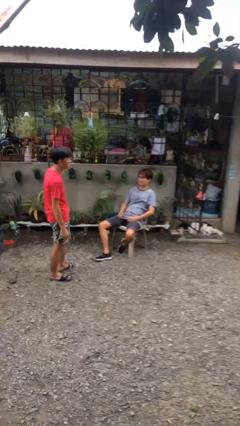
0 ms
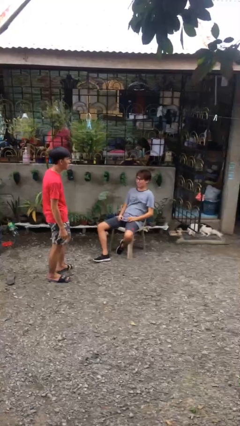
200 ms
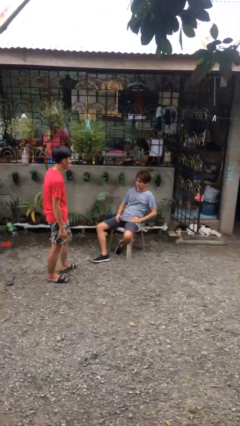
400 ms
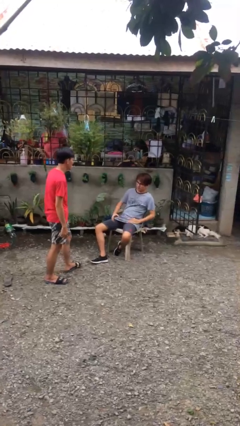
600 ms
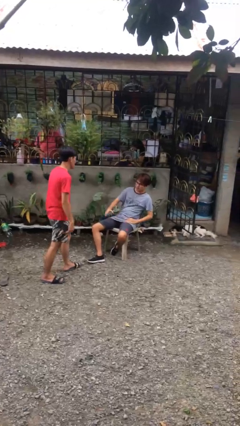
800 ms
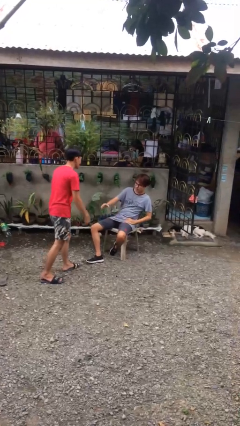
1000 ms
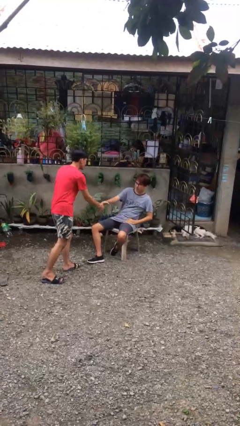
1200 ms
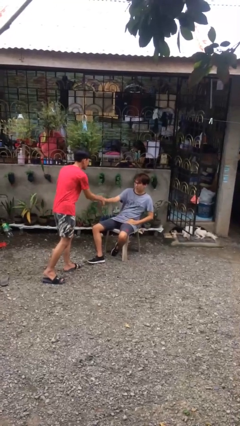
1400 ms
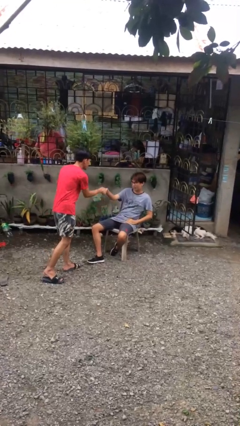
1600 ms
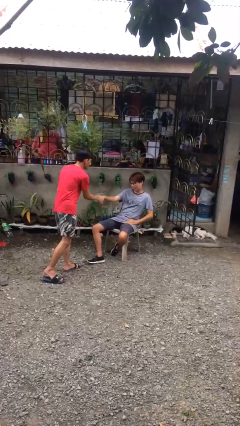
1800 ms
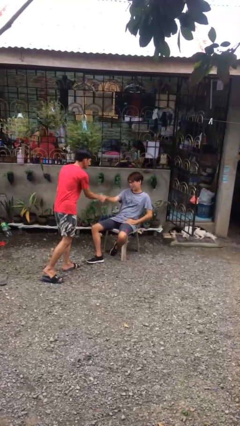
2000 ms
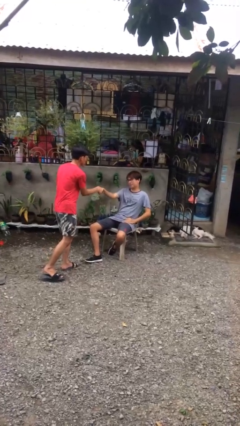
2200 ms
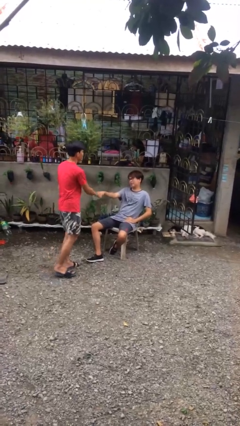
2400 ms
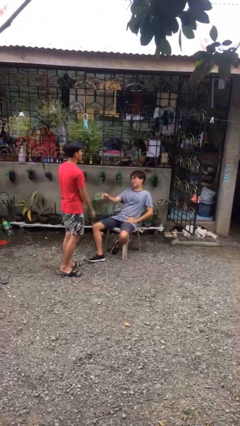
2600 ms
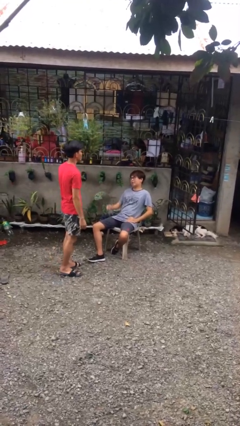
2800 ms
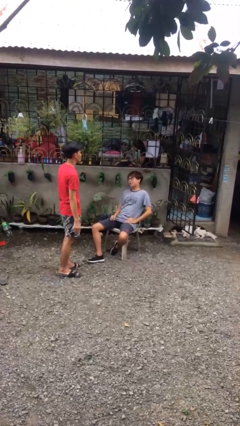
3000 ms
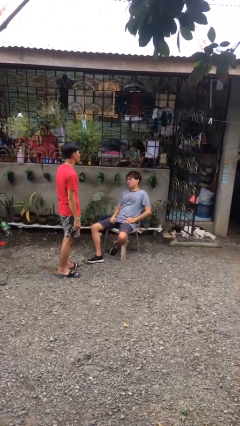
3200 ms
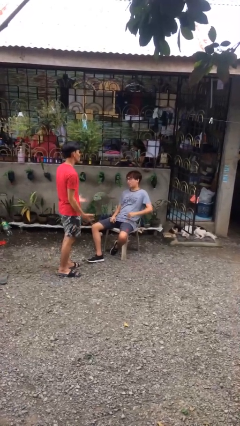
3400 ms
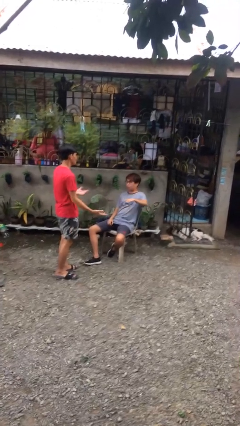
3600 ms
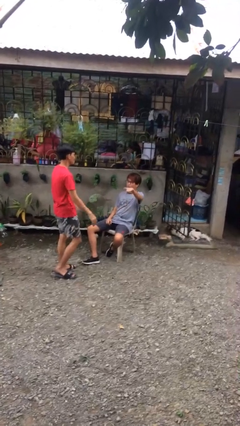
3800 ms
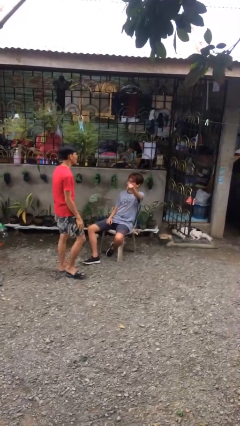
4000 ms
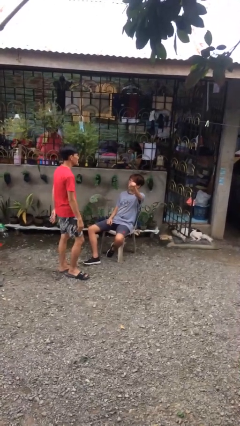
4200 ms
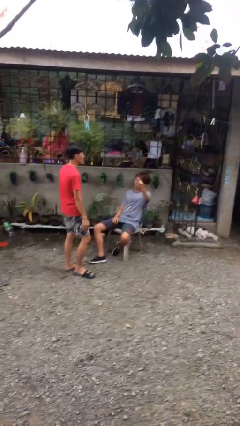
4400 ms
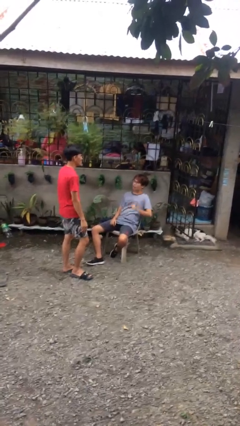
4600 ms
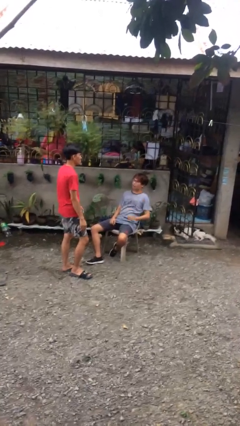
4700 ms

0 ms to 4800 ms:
person shakes hand

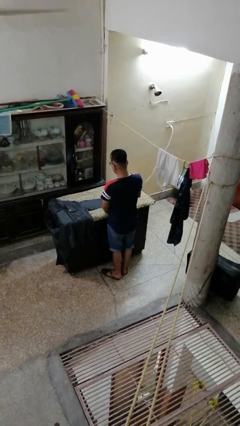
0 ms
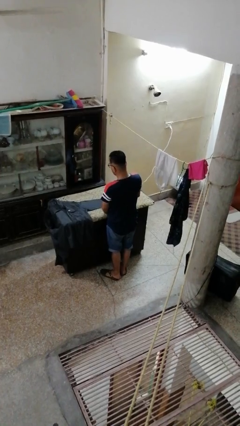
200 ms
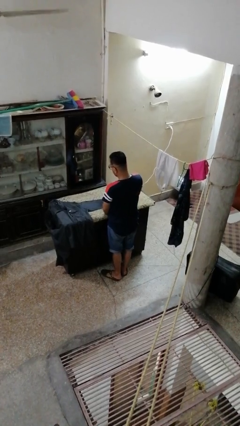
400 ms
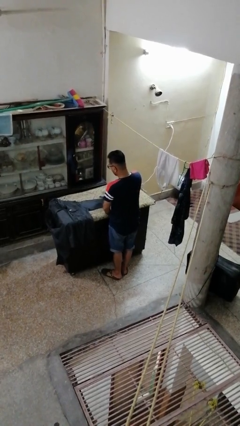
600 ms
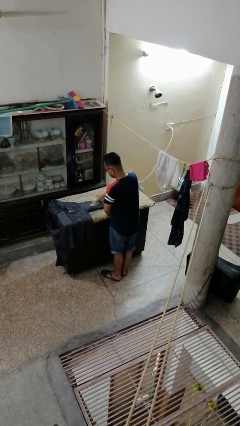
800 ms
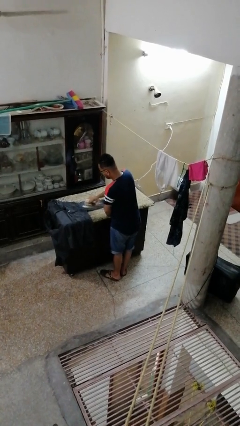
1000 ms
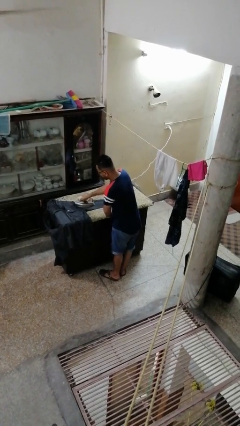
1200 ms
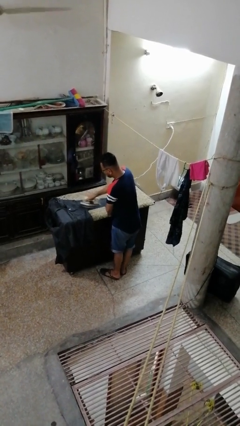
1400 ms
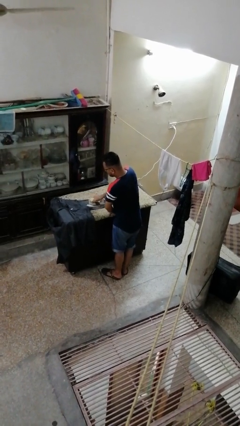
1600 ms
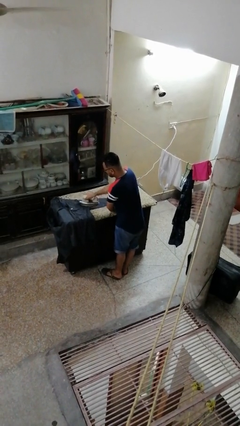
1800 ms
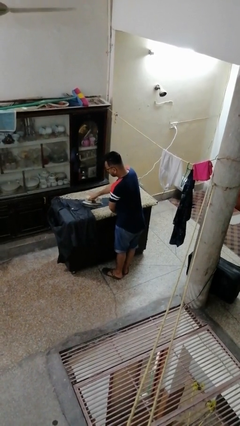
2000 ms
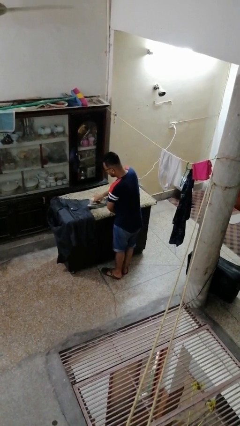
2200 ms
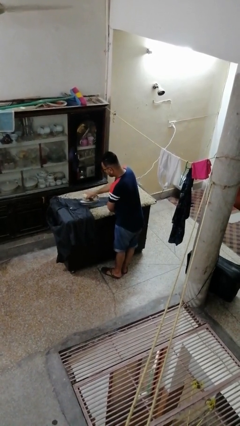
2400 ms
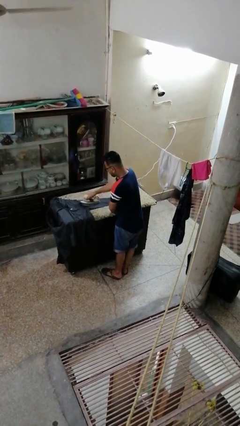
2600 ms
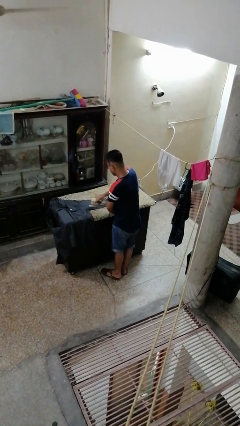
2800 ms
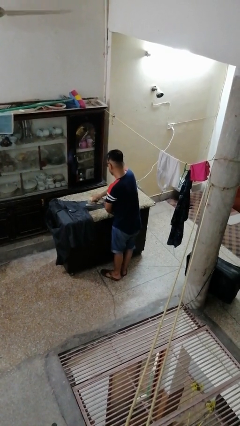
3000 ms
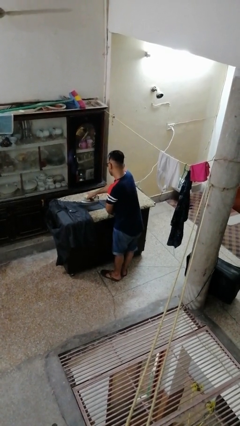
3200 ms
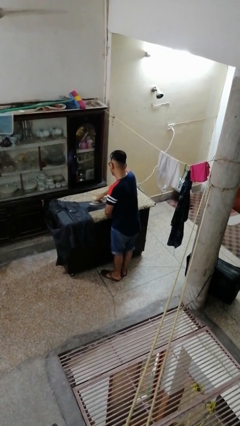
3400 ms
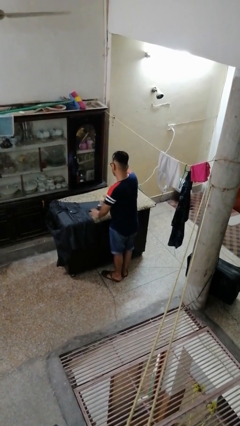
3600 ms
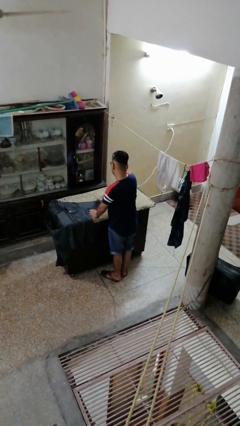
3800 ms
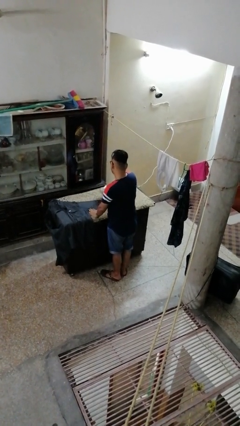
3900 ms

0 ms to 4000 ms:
person irons clothes

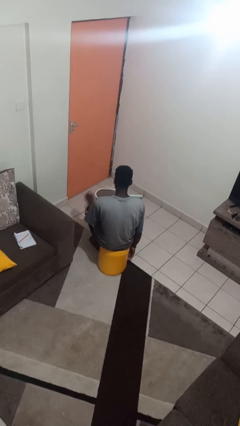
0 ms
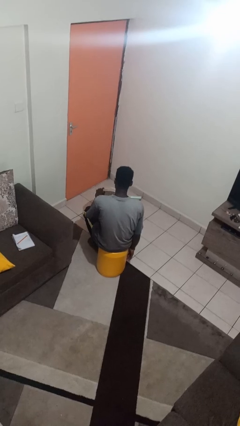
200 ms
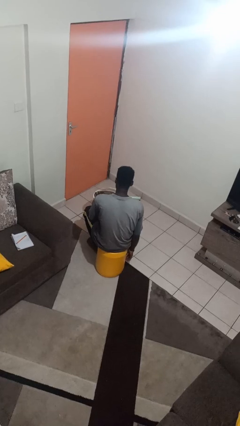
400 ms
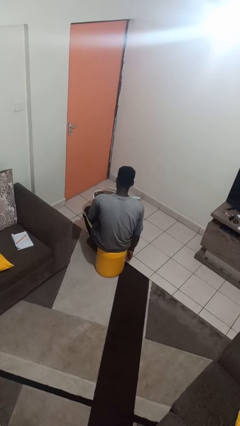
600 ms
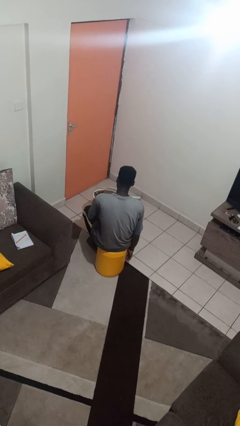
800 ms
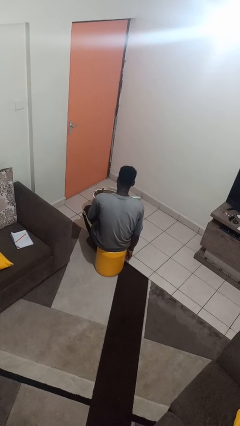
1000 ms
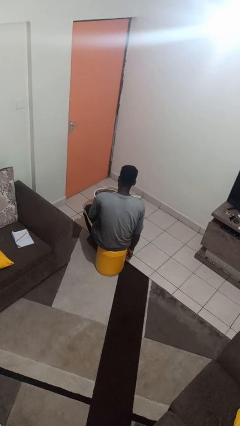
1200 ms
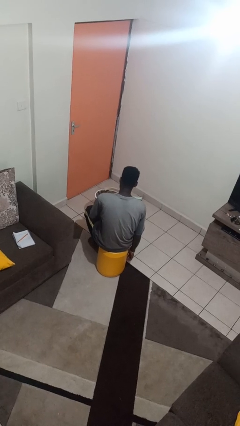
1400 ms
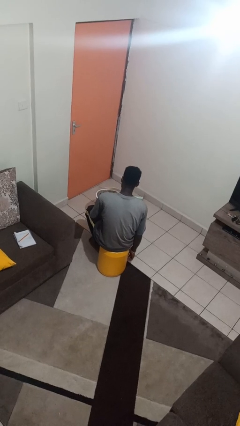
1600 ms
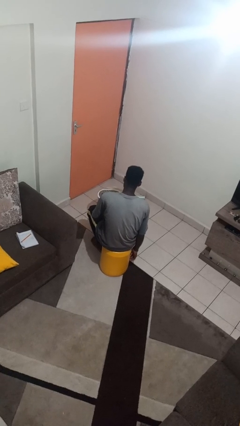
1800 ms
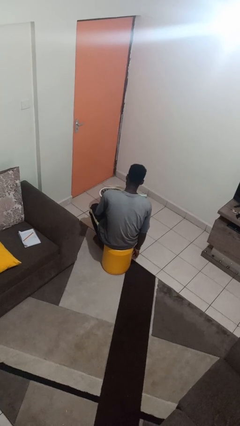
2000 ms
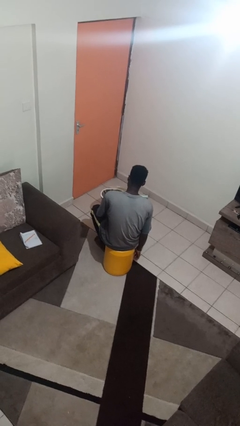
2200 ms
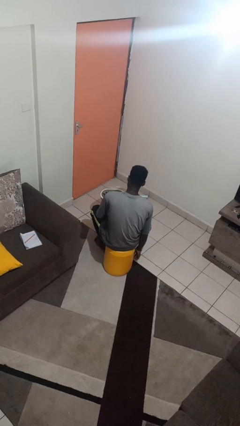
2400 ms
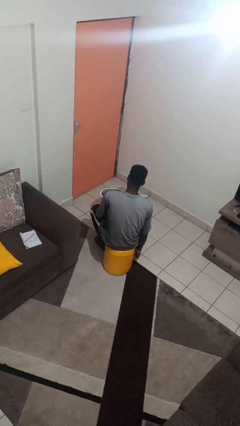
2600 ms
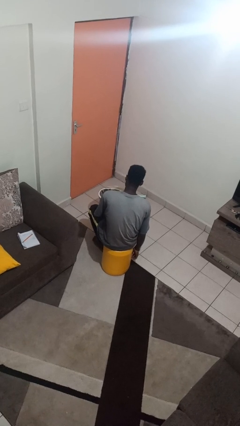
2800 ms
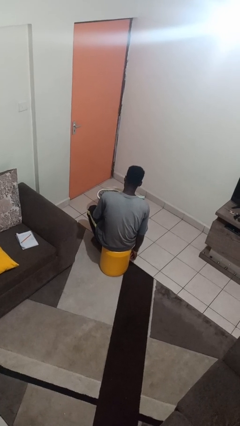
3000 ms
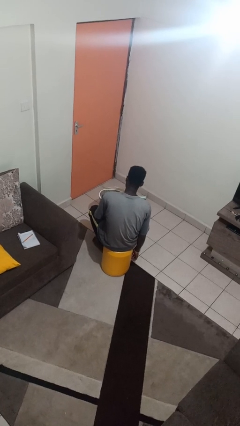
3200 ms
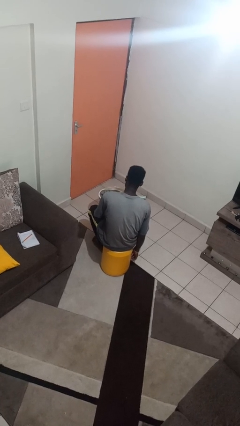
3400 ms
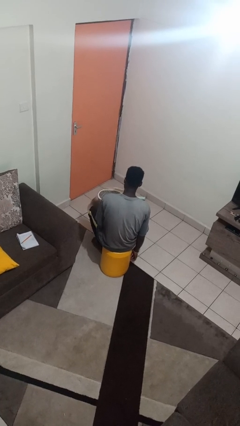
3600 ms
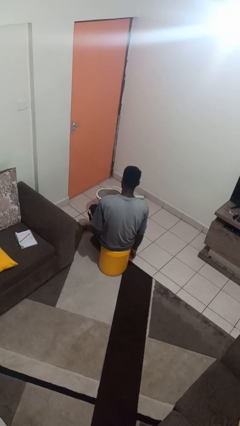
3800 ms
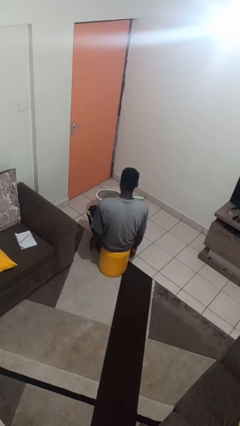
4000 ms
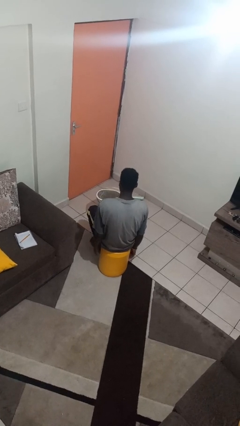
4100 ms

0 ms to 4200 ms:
person taps object with finger

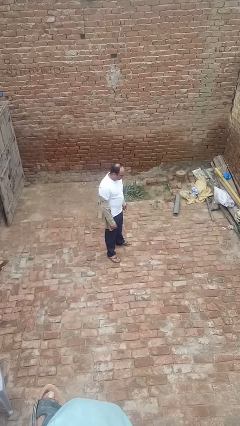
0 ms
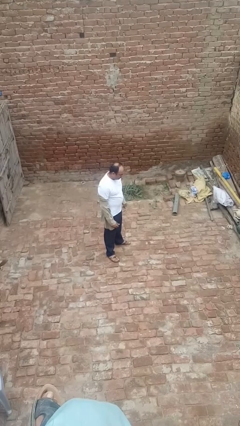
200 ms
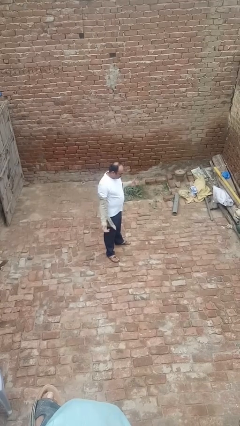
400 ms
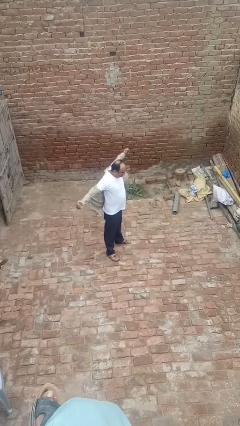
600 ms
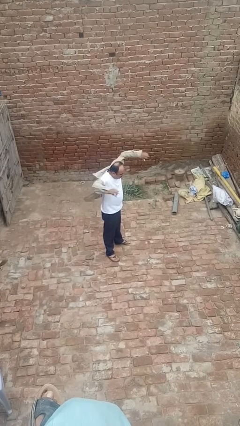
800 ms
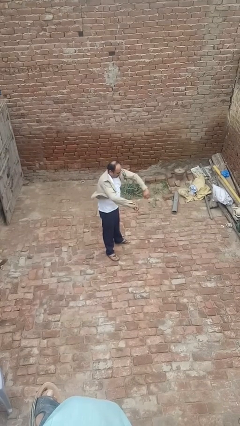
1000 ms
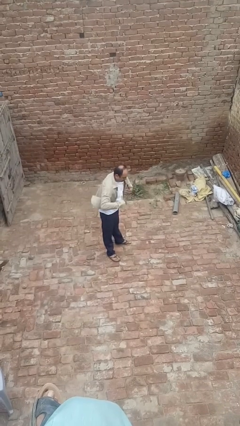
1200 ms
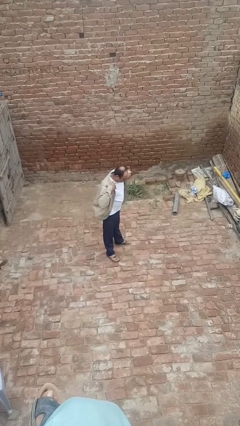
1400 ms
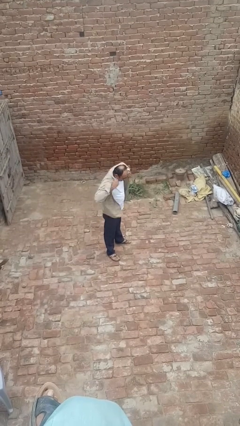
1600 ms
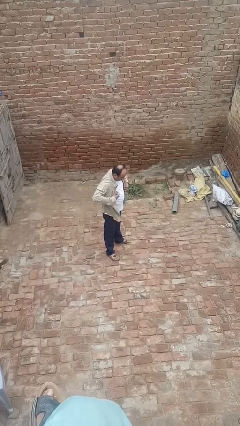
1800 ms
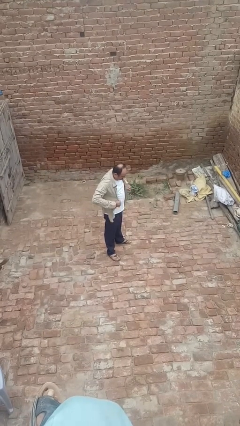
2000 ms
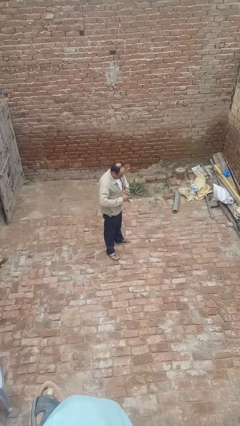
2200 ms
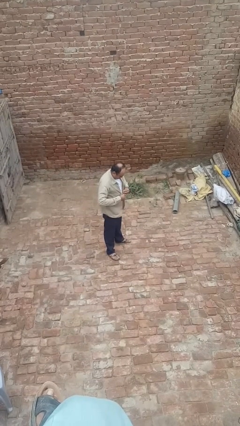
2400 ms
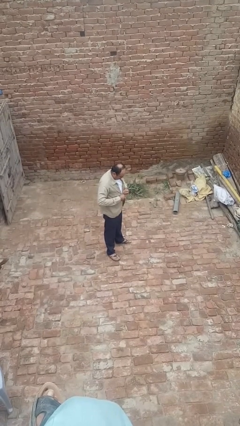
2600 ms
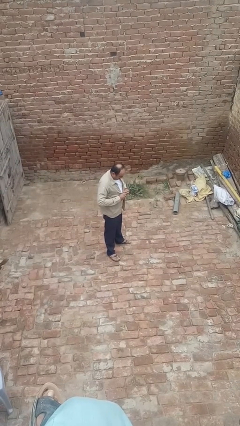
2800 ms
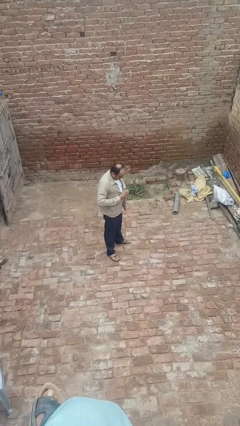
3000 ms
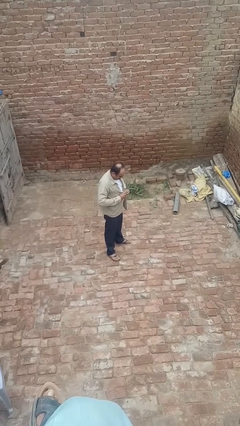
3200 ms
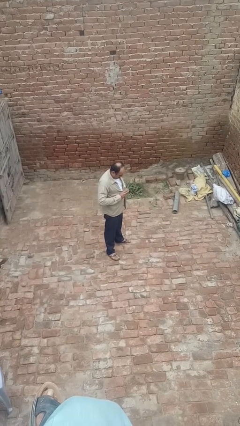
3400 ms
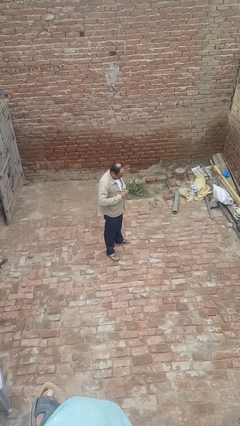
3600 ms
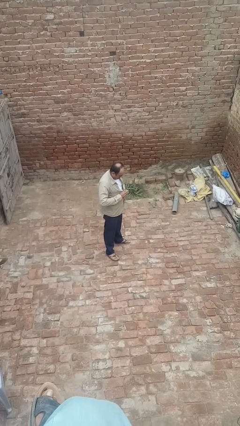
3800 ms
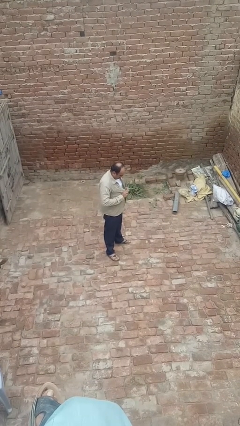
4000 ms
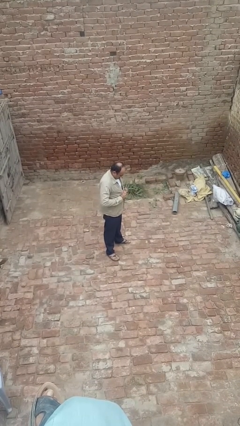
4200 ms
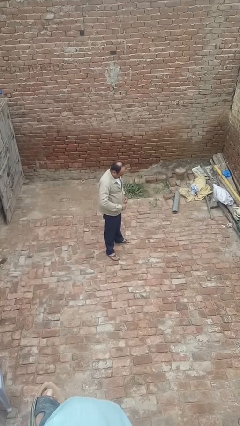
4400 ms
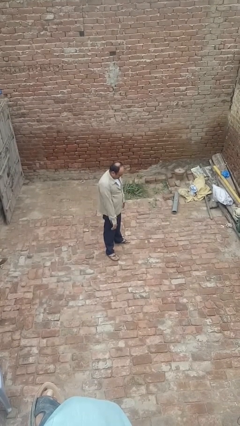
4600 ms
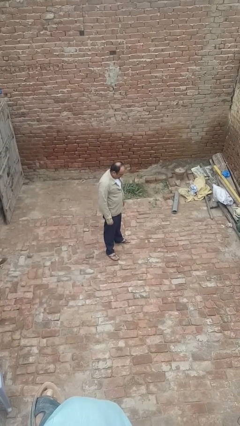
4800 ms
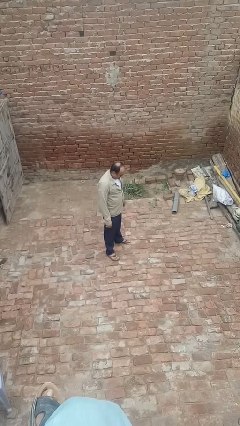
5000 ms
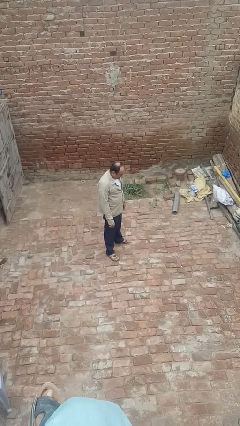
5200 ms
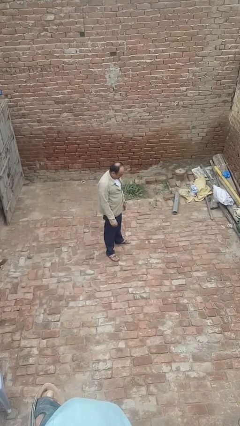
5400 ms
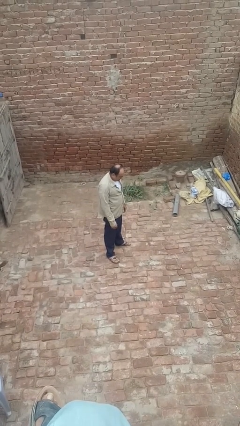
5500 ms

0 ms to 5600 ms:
person puts on shirt
